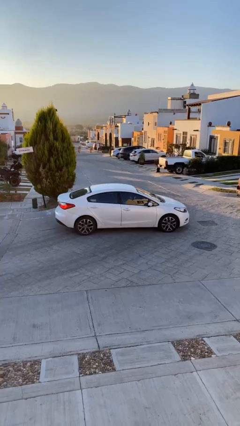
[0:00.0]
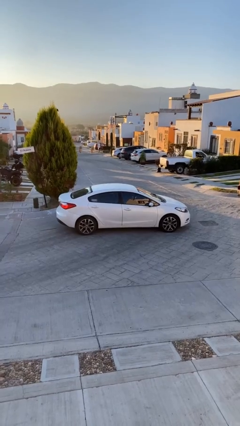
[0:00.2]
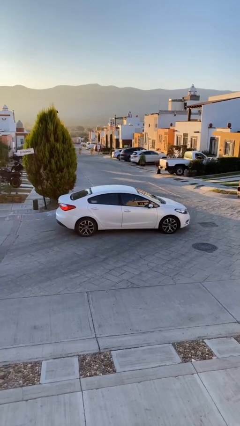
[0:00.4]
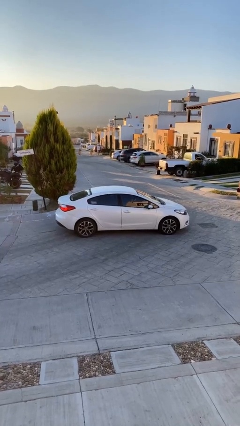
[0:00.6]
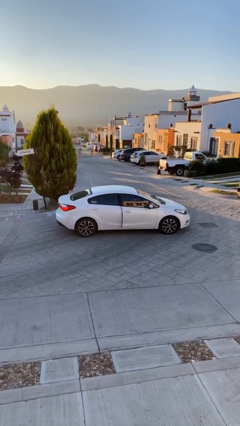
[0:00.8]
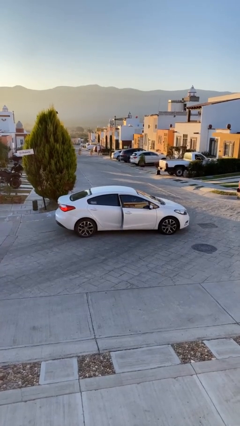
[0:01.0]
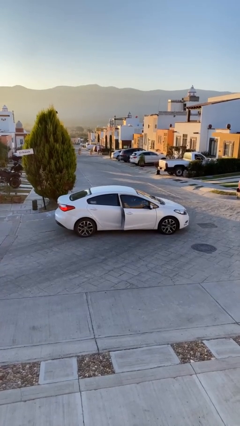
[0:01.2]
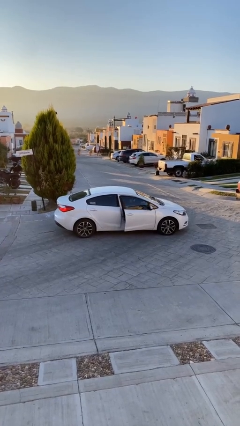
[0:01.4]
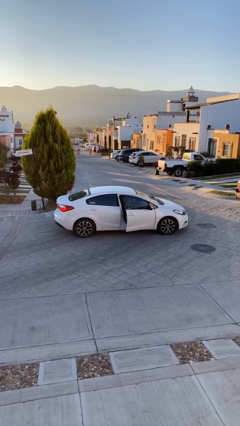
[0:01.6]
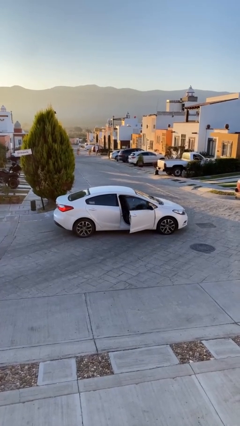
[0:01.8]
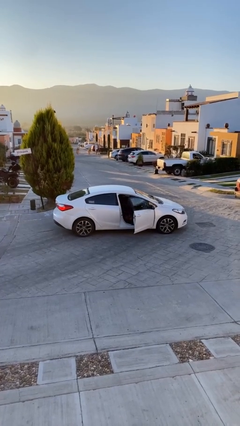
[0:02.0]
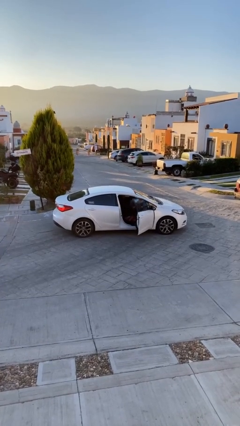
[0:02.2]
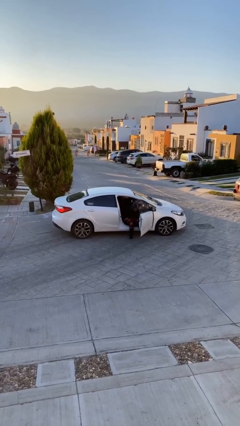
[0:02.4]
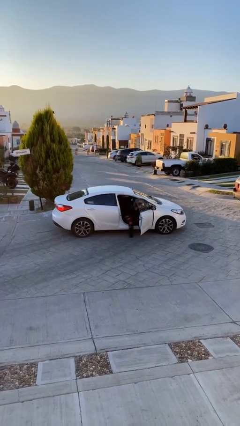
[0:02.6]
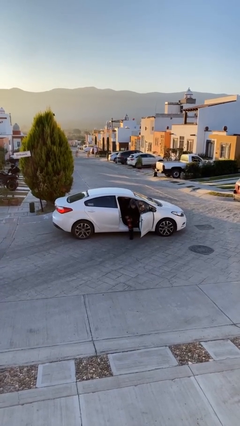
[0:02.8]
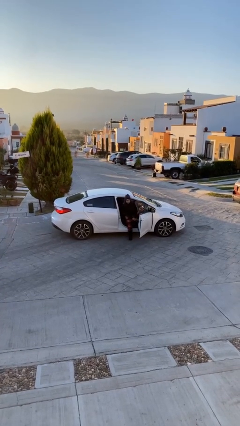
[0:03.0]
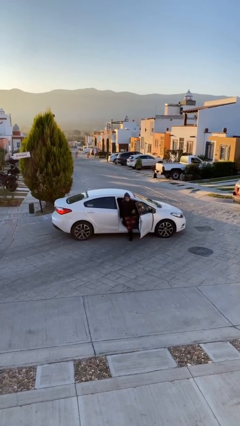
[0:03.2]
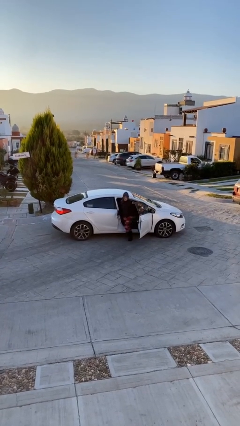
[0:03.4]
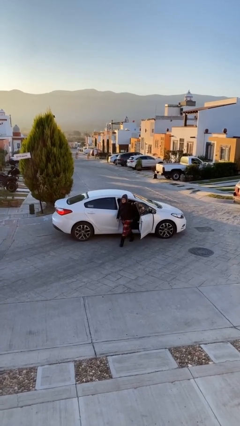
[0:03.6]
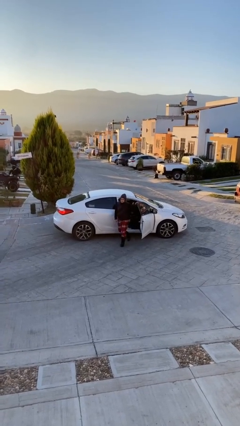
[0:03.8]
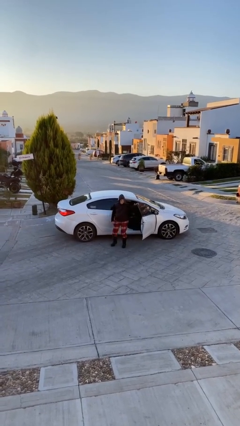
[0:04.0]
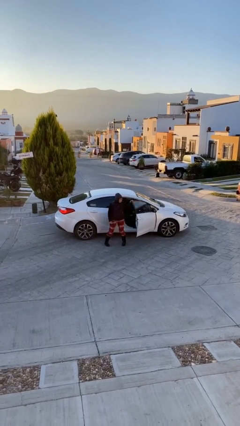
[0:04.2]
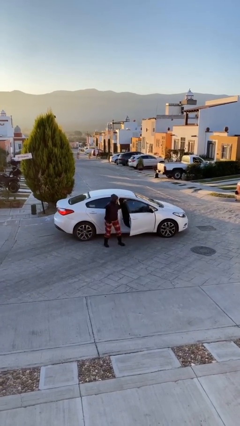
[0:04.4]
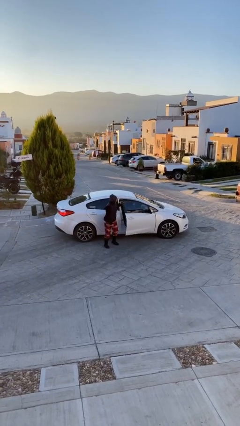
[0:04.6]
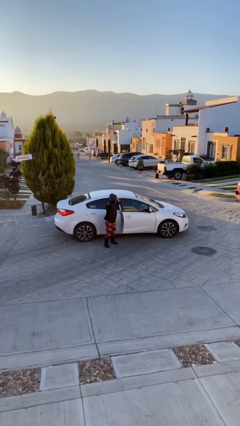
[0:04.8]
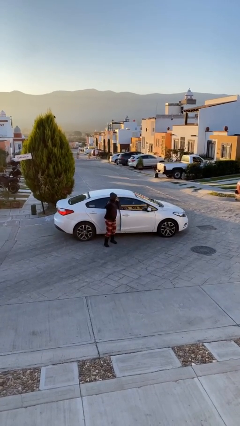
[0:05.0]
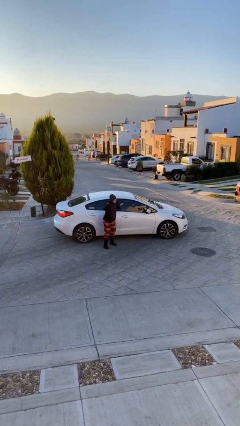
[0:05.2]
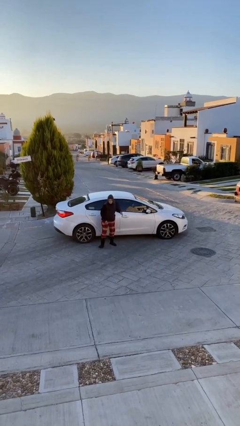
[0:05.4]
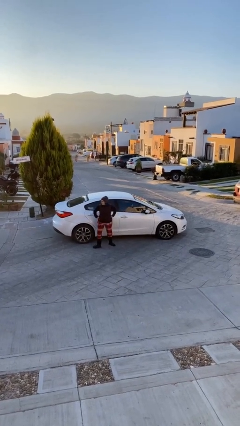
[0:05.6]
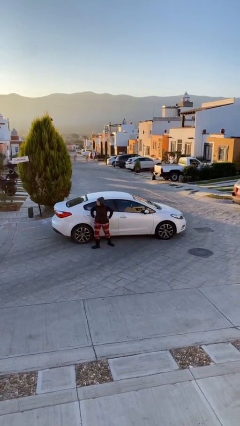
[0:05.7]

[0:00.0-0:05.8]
car drops off person

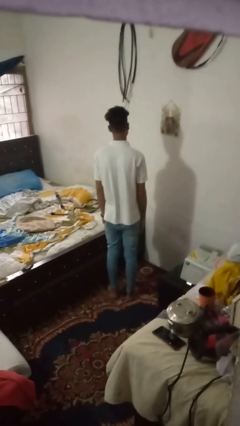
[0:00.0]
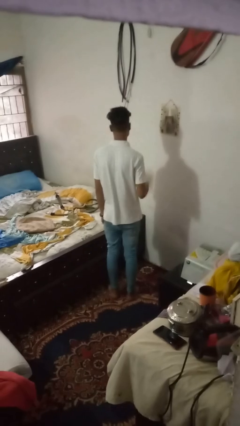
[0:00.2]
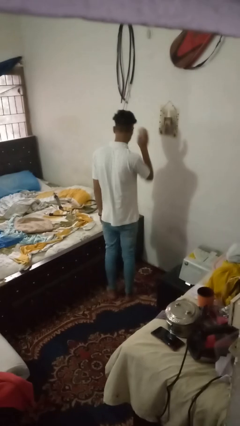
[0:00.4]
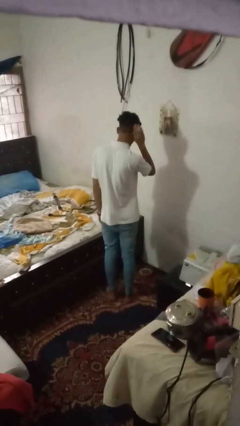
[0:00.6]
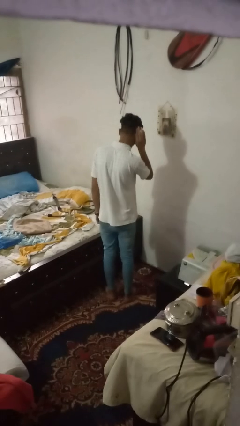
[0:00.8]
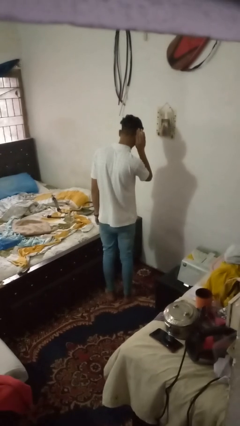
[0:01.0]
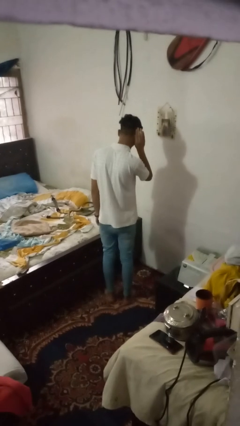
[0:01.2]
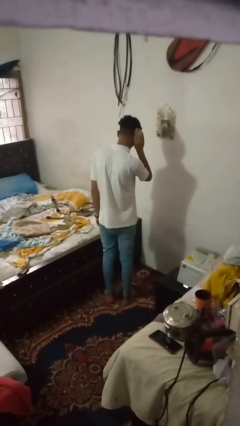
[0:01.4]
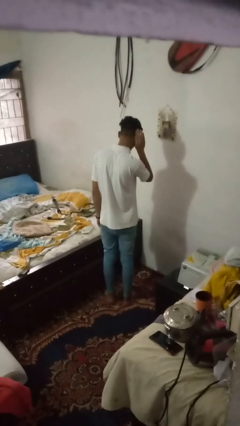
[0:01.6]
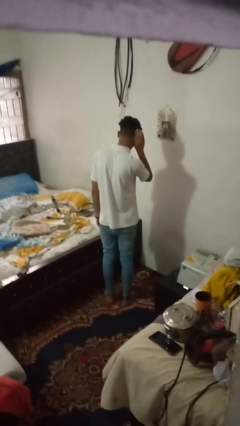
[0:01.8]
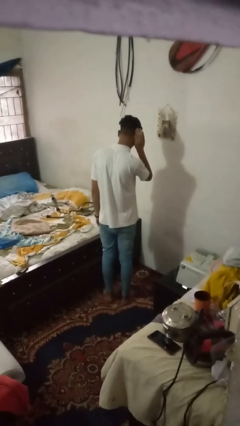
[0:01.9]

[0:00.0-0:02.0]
person gestures listen closely

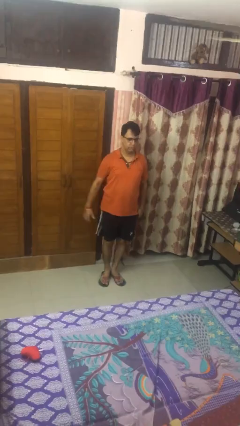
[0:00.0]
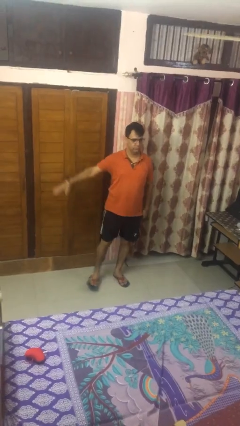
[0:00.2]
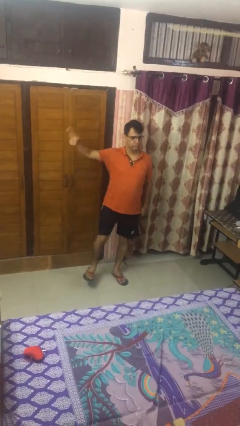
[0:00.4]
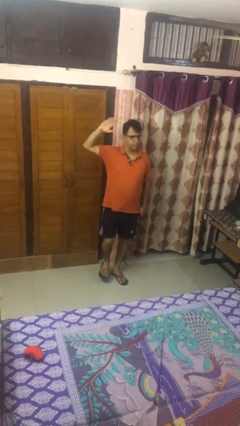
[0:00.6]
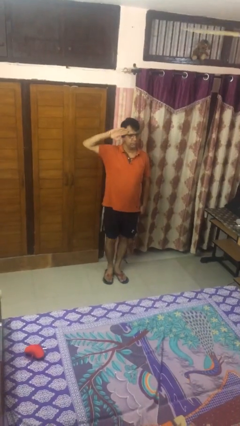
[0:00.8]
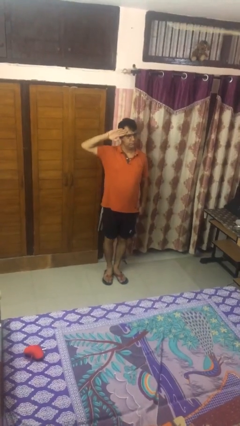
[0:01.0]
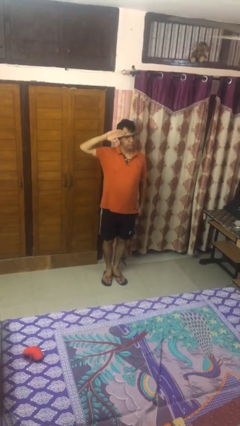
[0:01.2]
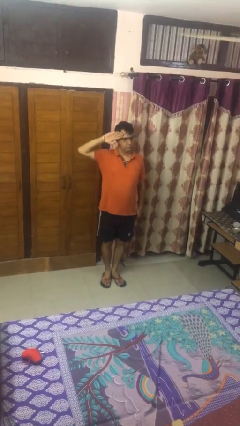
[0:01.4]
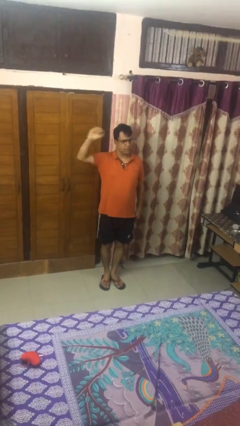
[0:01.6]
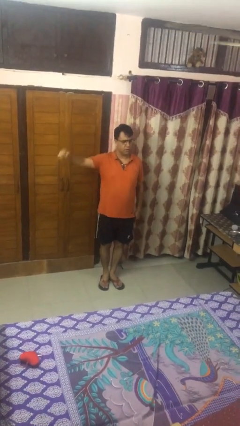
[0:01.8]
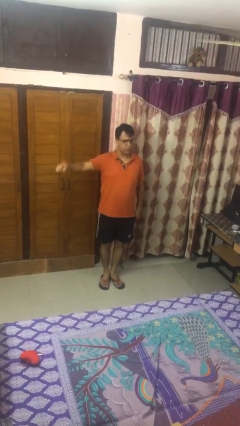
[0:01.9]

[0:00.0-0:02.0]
person salutes

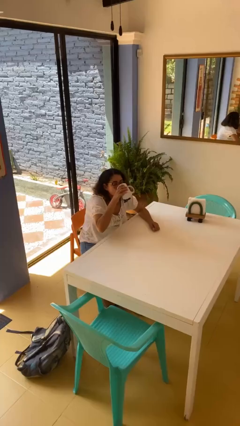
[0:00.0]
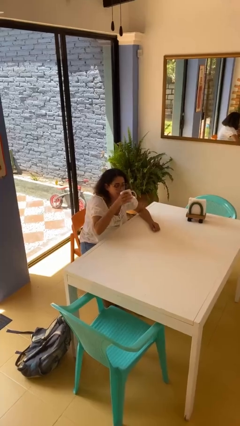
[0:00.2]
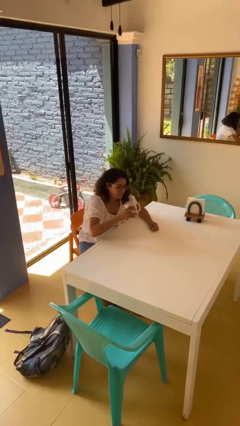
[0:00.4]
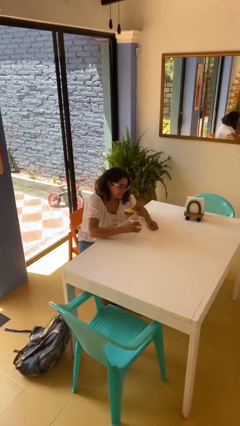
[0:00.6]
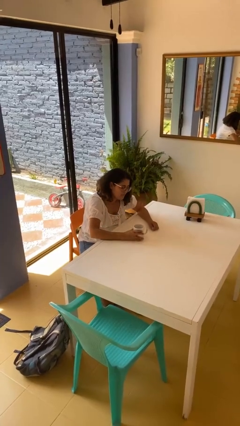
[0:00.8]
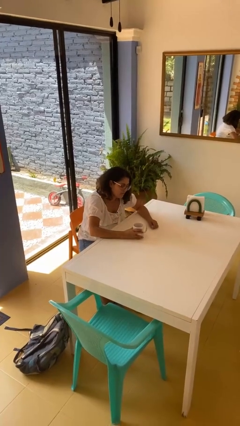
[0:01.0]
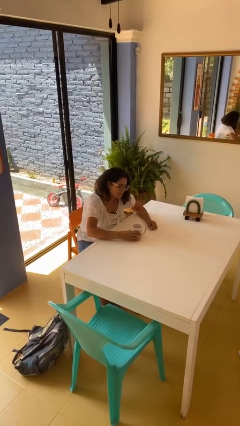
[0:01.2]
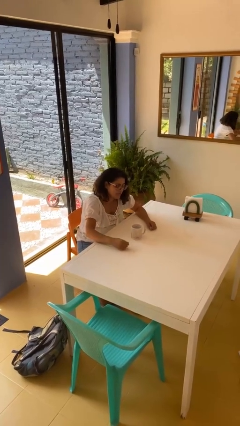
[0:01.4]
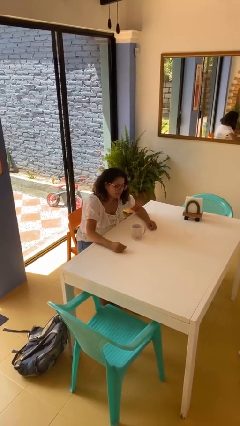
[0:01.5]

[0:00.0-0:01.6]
person puts down object on table

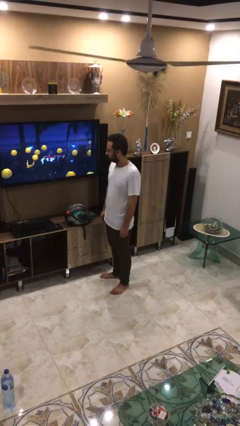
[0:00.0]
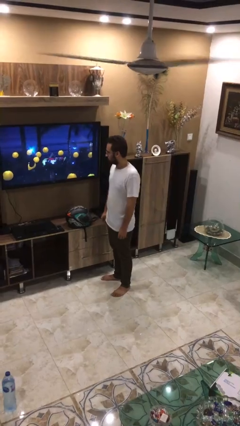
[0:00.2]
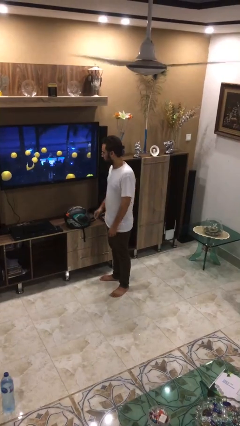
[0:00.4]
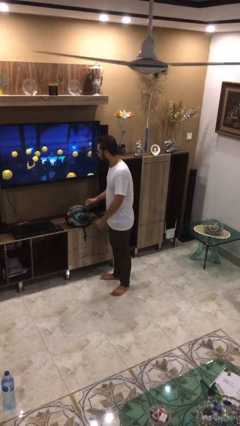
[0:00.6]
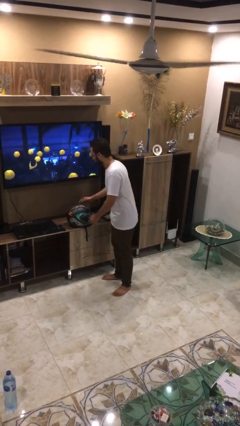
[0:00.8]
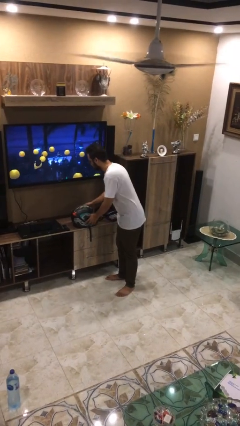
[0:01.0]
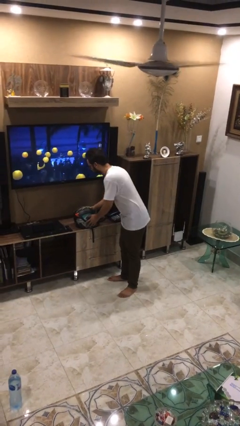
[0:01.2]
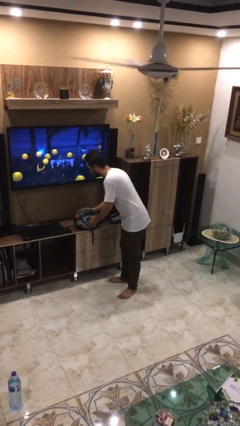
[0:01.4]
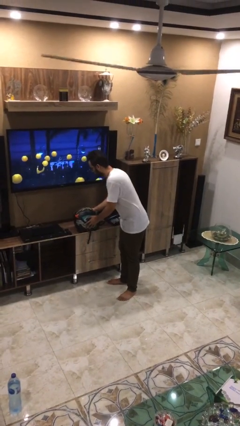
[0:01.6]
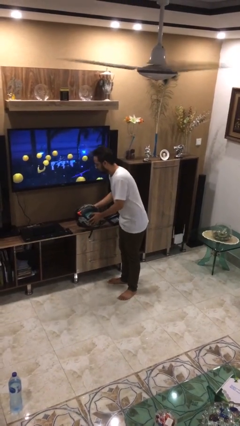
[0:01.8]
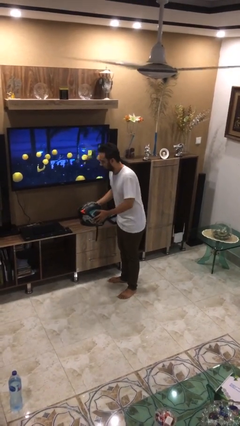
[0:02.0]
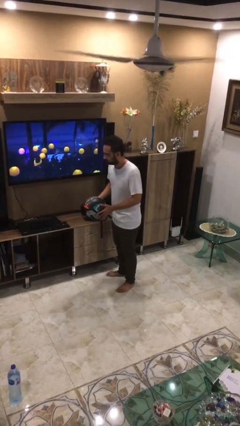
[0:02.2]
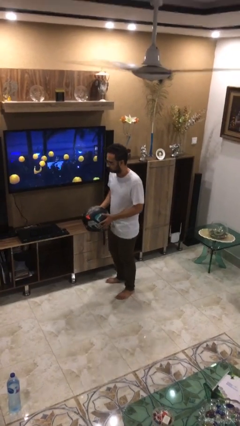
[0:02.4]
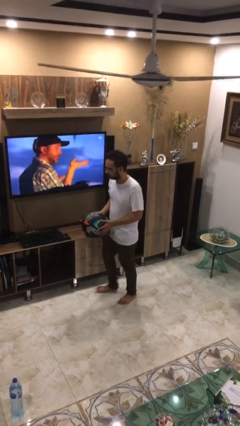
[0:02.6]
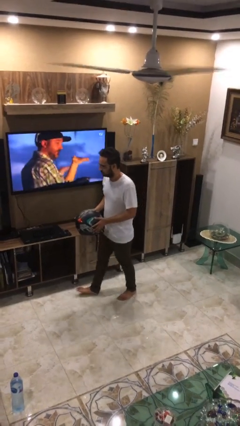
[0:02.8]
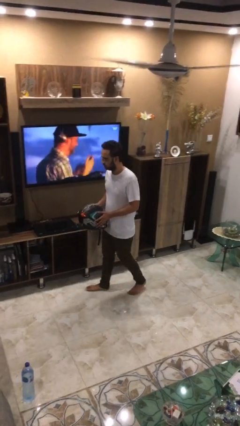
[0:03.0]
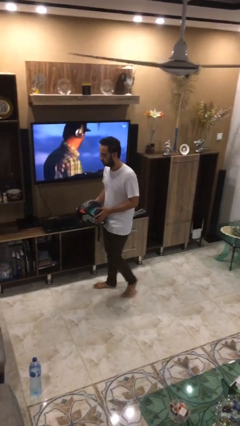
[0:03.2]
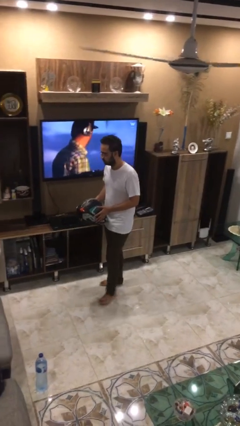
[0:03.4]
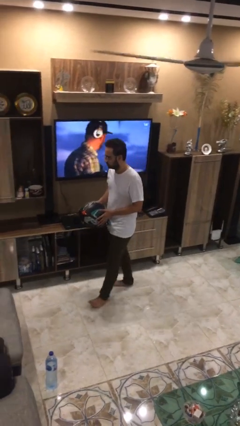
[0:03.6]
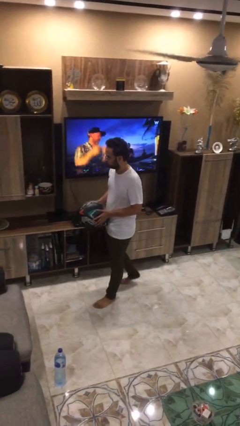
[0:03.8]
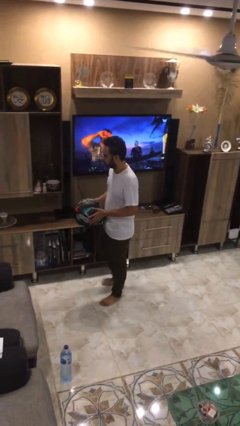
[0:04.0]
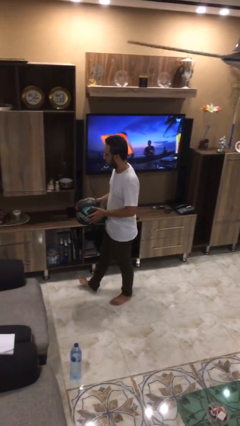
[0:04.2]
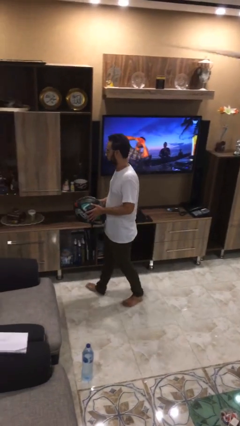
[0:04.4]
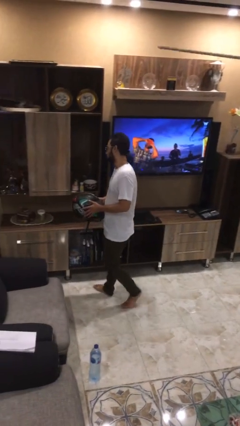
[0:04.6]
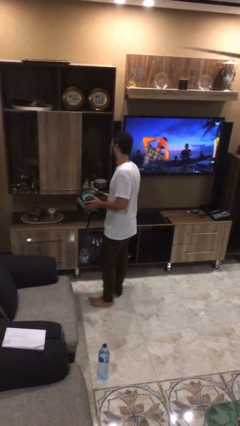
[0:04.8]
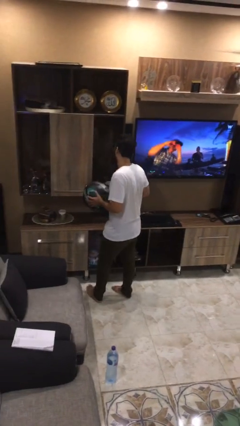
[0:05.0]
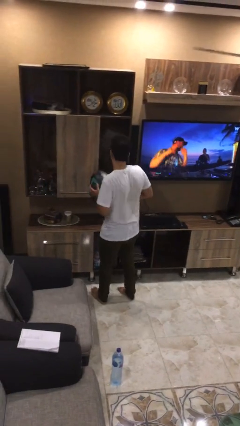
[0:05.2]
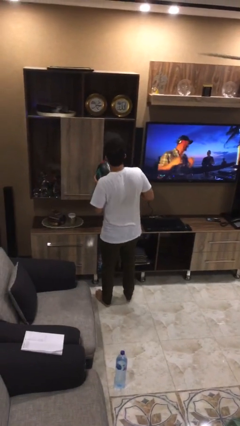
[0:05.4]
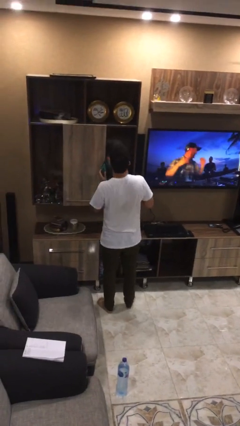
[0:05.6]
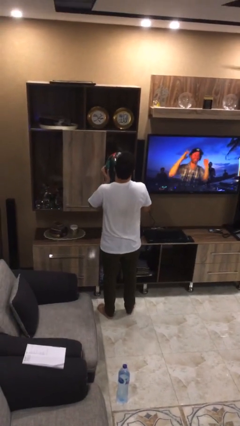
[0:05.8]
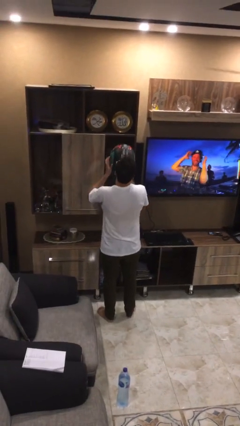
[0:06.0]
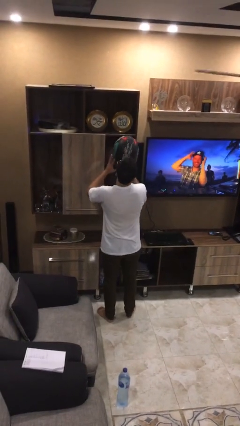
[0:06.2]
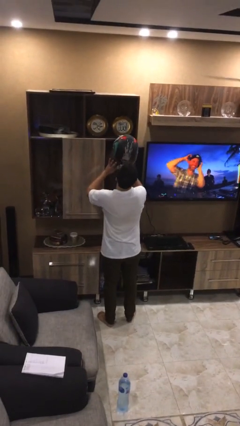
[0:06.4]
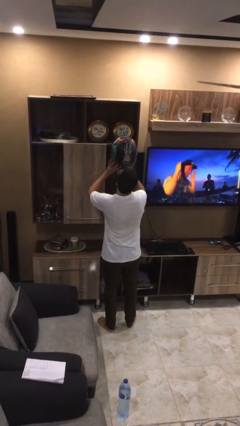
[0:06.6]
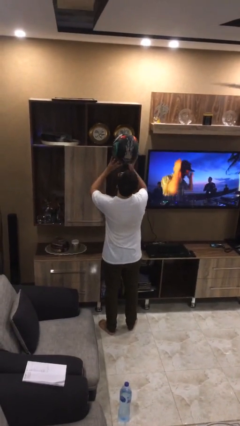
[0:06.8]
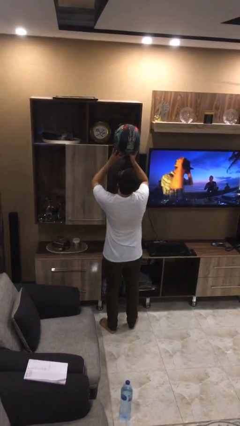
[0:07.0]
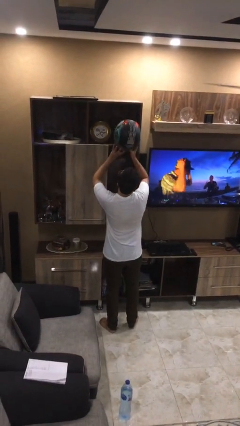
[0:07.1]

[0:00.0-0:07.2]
person picks up object from table
